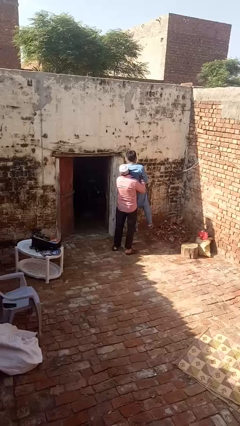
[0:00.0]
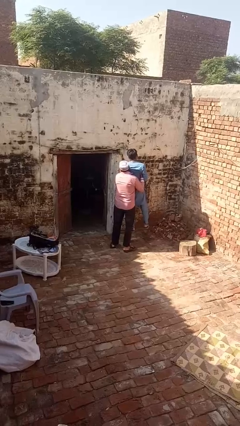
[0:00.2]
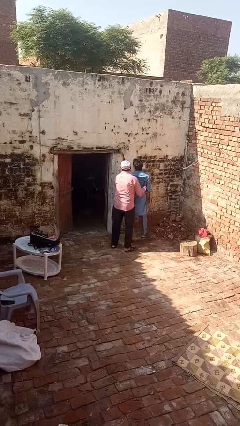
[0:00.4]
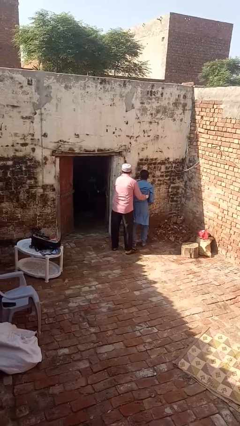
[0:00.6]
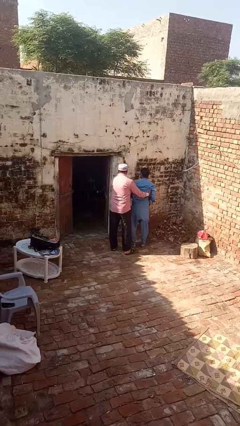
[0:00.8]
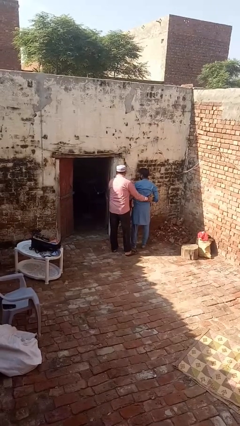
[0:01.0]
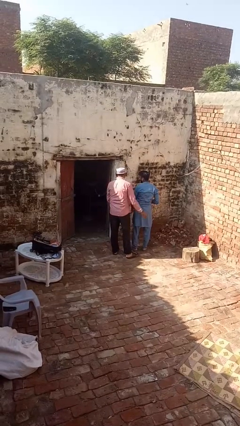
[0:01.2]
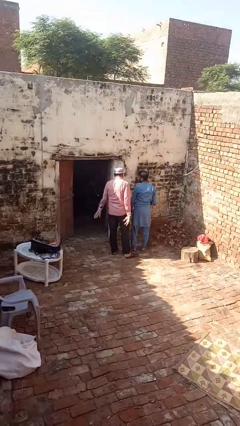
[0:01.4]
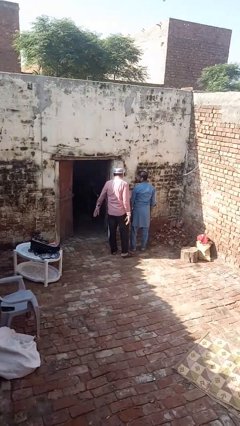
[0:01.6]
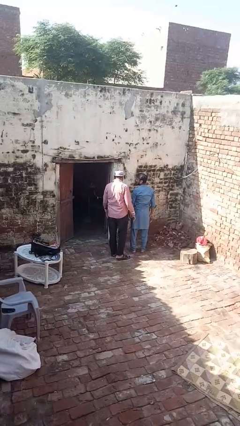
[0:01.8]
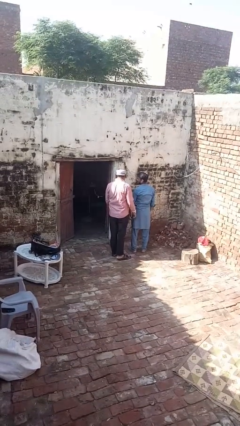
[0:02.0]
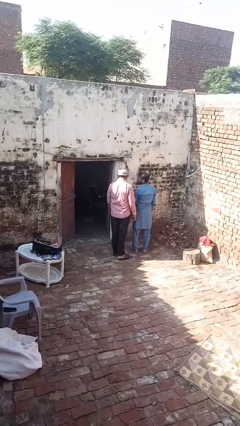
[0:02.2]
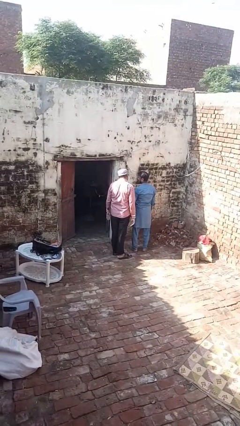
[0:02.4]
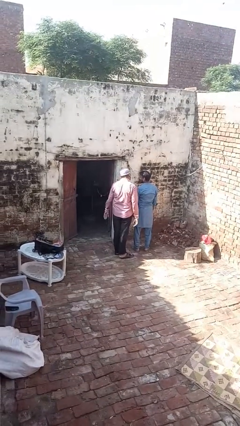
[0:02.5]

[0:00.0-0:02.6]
person puts down person

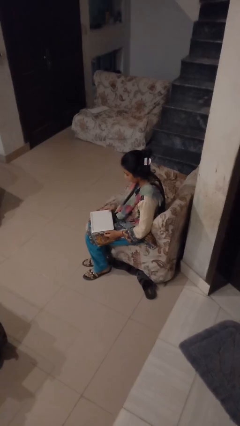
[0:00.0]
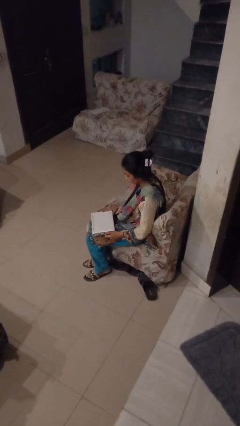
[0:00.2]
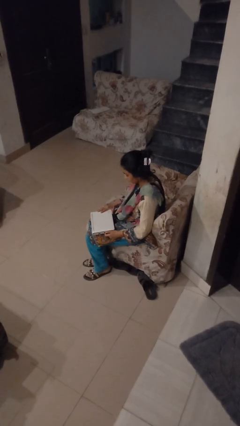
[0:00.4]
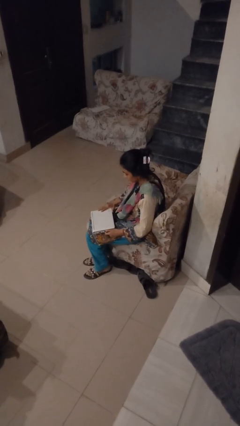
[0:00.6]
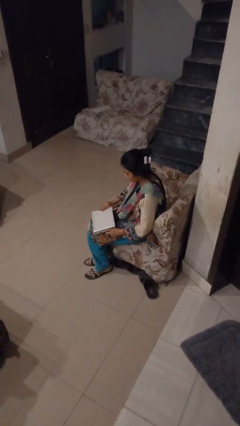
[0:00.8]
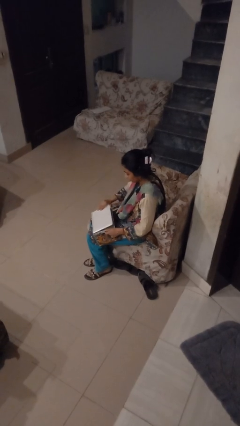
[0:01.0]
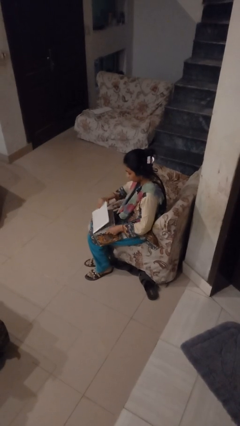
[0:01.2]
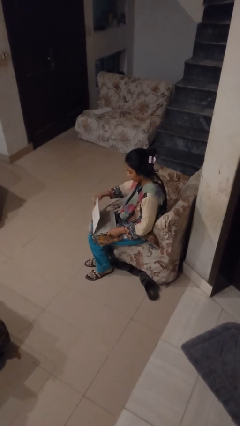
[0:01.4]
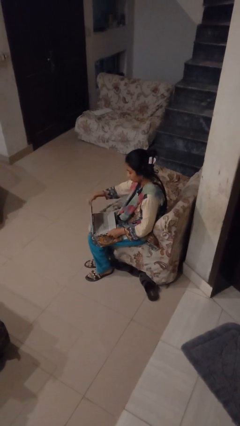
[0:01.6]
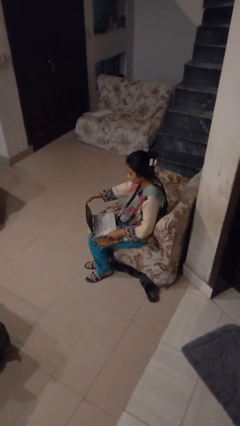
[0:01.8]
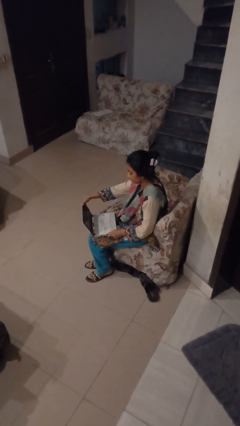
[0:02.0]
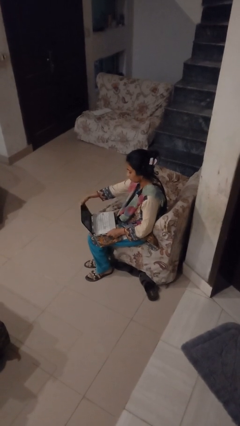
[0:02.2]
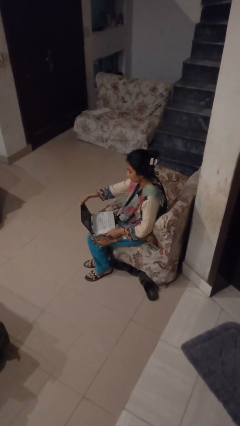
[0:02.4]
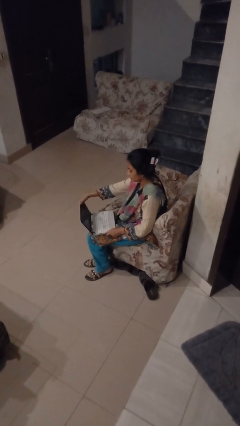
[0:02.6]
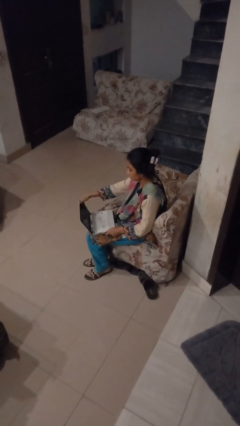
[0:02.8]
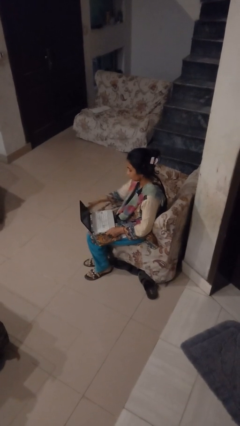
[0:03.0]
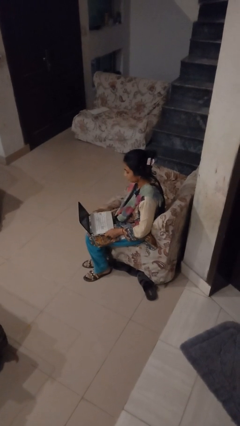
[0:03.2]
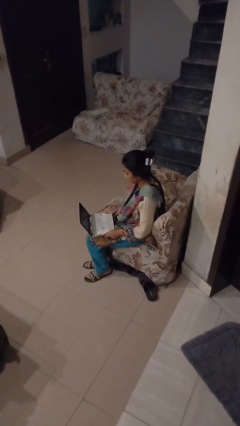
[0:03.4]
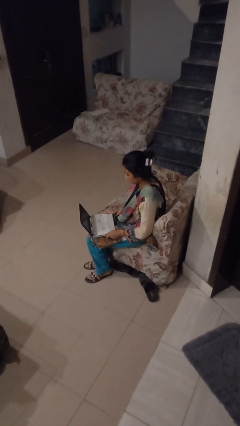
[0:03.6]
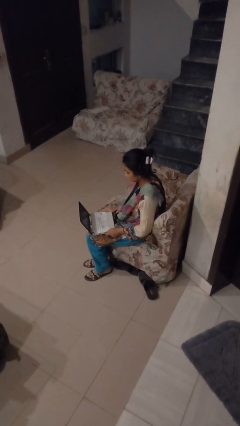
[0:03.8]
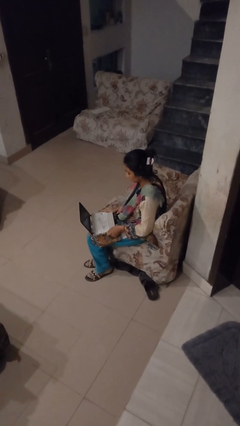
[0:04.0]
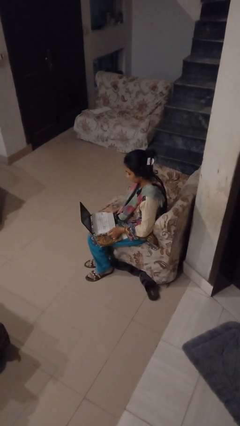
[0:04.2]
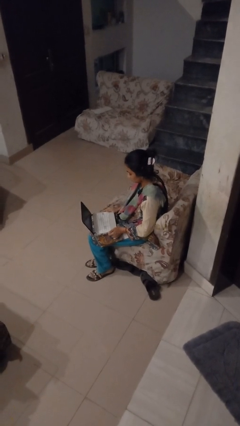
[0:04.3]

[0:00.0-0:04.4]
person opens laptop

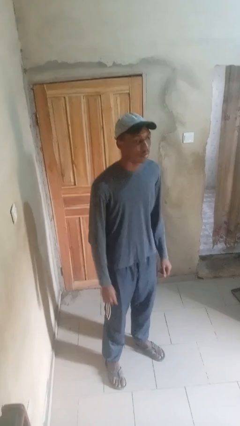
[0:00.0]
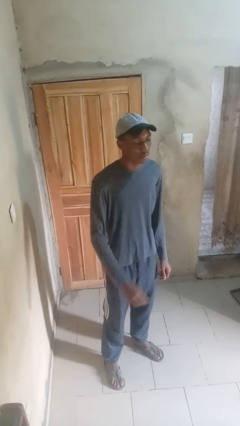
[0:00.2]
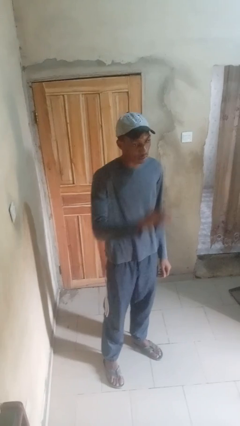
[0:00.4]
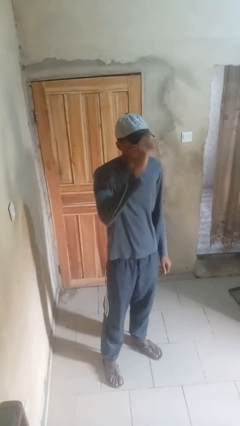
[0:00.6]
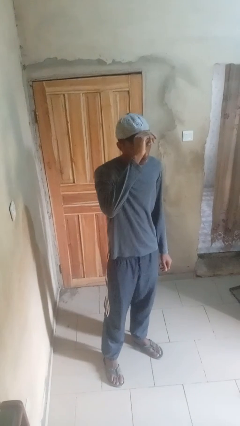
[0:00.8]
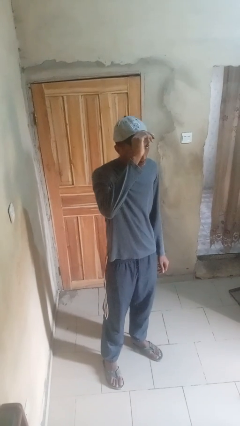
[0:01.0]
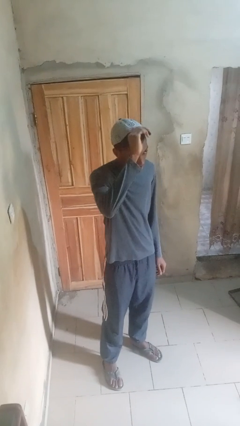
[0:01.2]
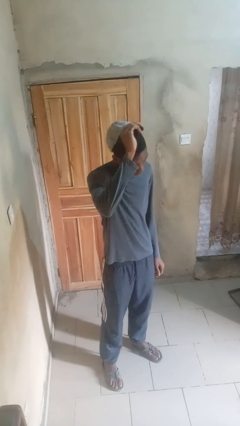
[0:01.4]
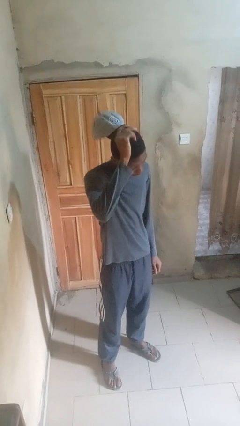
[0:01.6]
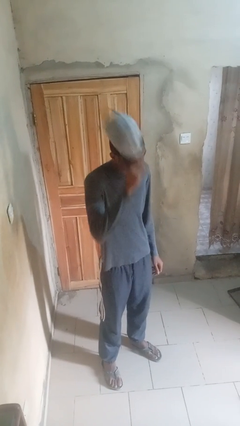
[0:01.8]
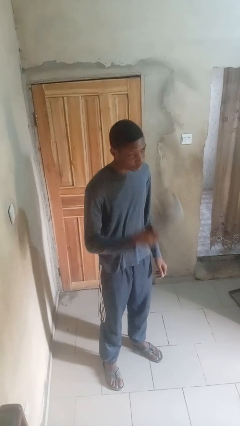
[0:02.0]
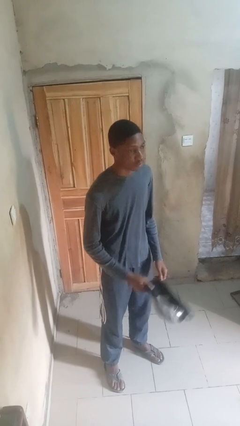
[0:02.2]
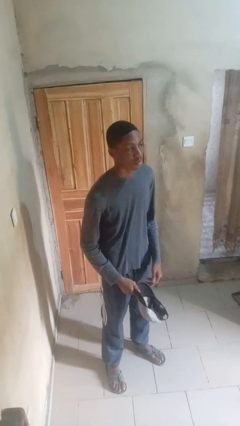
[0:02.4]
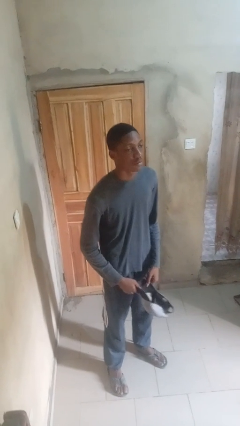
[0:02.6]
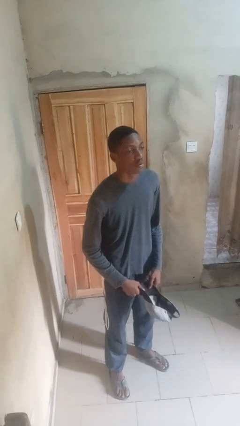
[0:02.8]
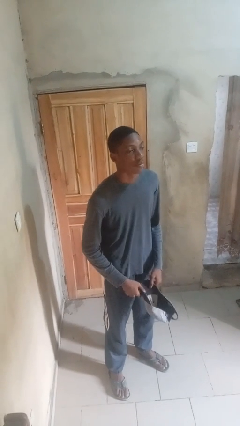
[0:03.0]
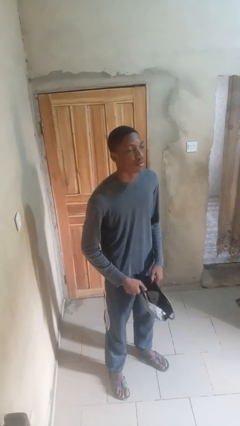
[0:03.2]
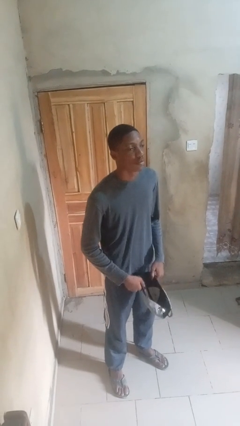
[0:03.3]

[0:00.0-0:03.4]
person takes off hat

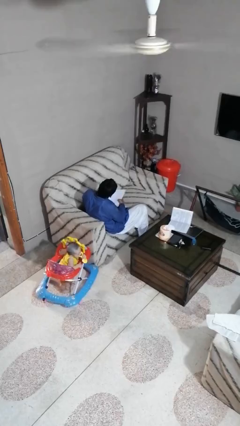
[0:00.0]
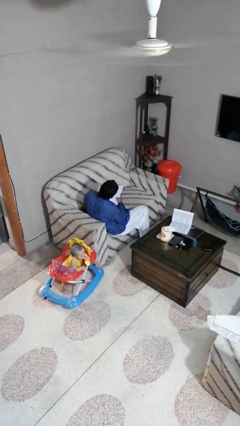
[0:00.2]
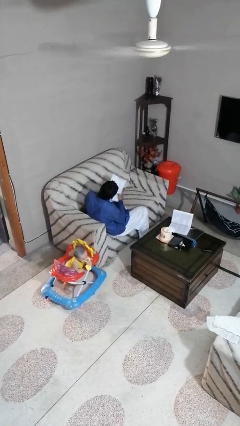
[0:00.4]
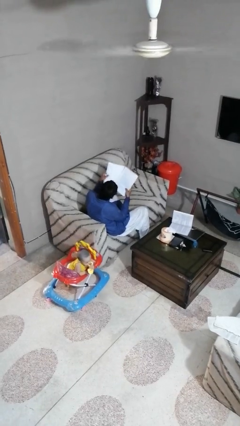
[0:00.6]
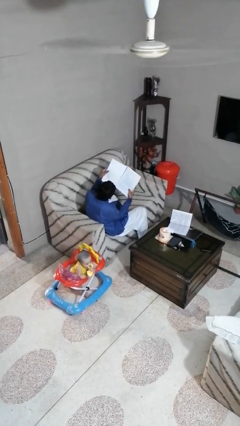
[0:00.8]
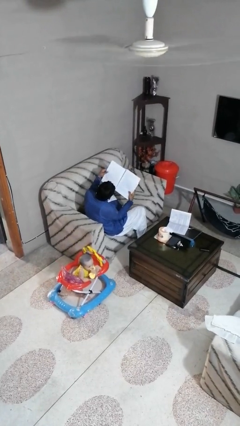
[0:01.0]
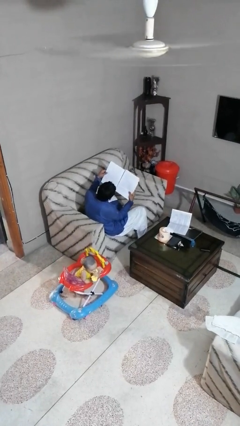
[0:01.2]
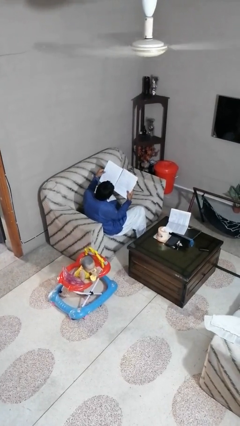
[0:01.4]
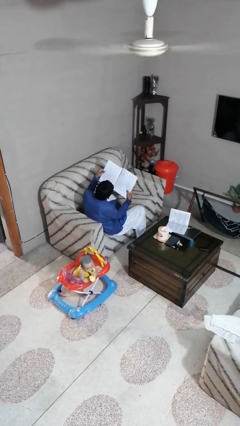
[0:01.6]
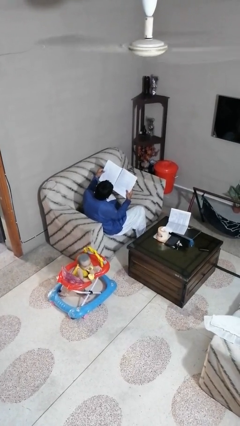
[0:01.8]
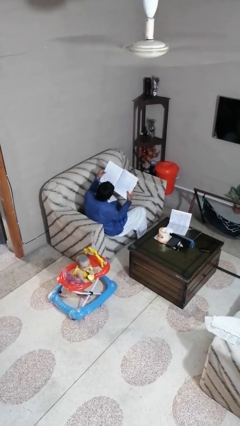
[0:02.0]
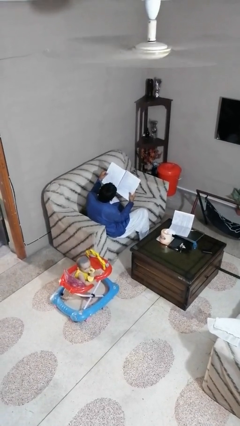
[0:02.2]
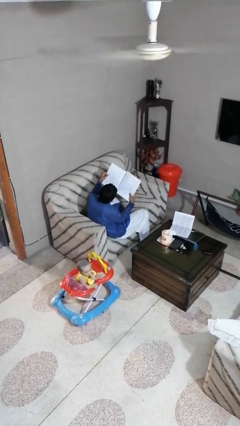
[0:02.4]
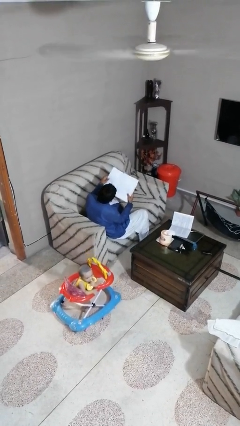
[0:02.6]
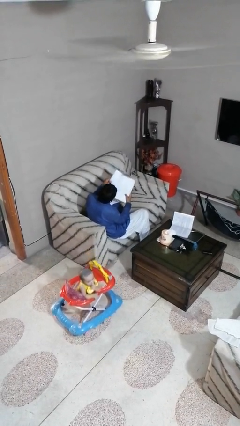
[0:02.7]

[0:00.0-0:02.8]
person reads magazine

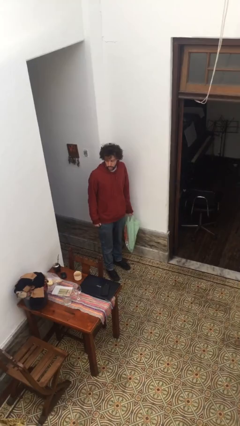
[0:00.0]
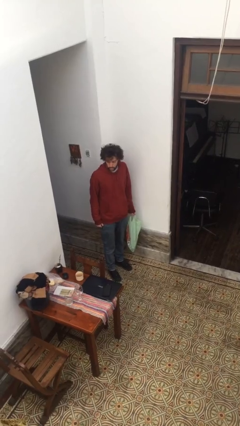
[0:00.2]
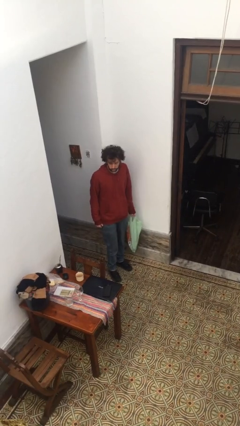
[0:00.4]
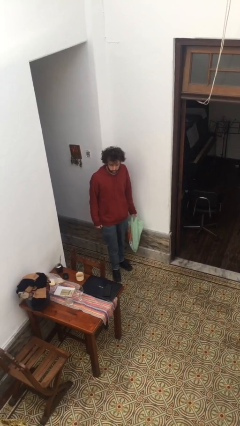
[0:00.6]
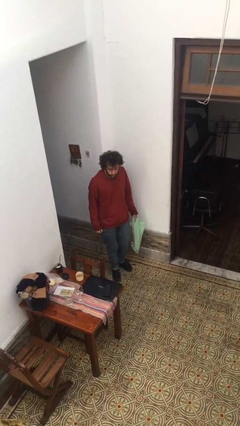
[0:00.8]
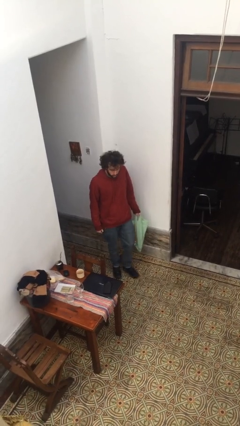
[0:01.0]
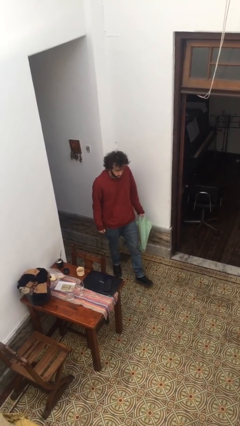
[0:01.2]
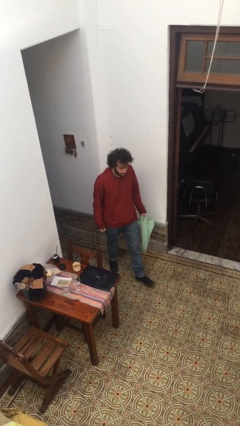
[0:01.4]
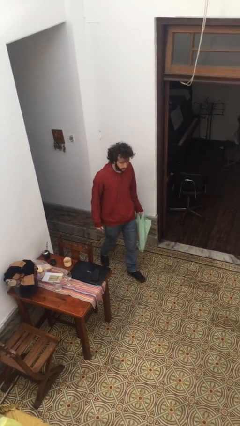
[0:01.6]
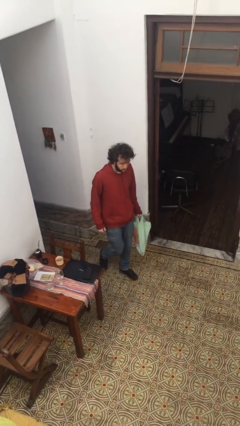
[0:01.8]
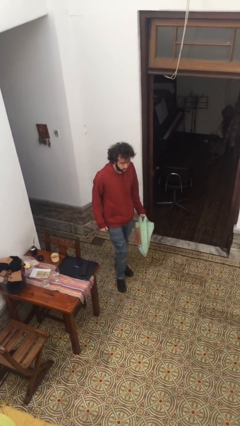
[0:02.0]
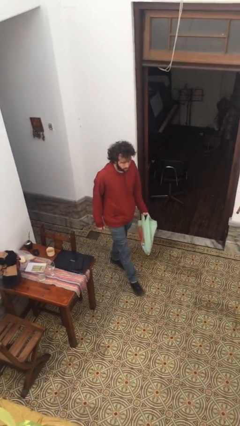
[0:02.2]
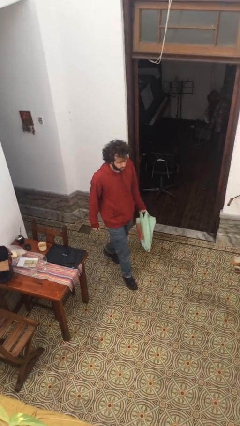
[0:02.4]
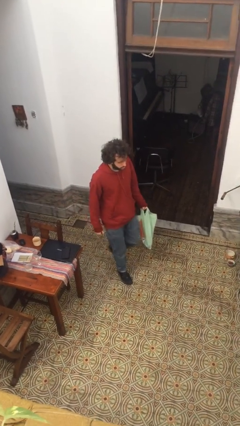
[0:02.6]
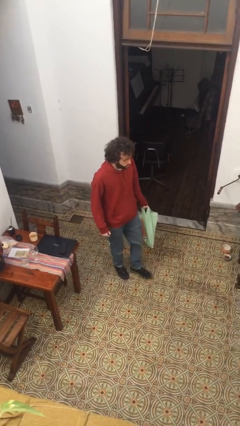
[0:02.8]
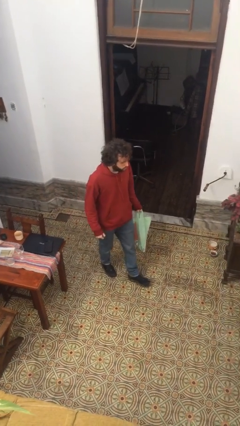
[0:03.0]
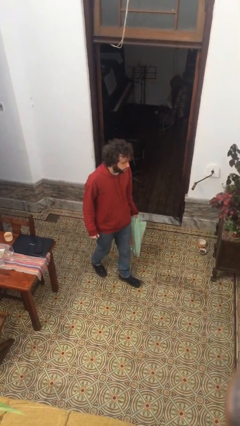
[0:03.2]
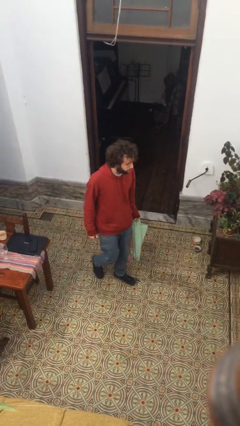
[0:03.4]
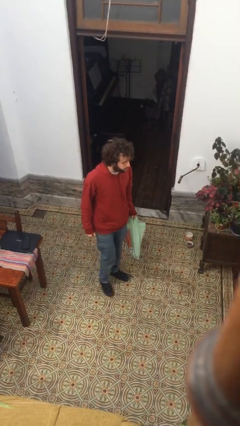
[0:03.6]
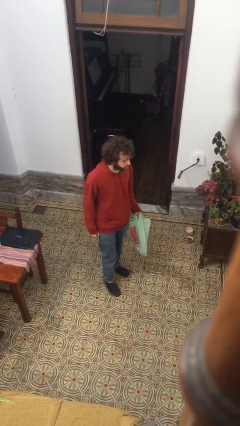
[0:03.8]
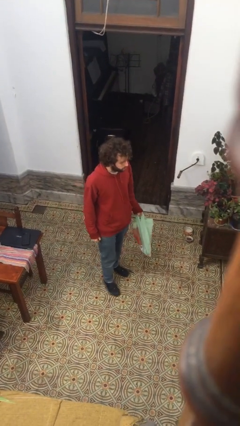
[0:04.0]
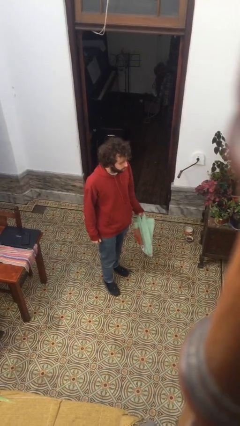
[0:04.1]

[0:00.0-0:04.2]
person carries groceries

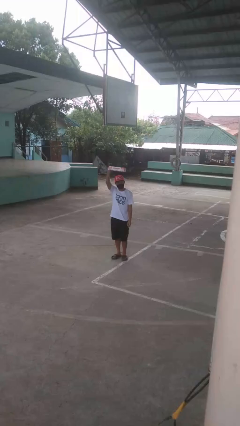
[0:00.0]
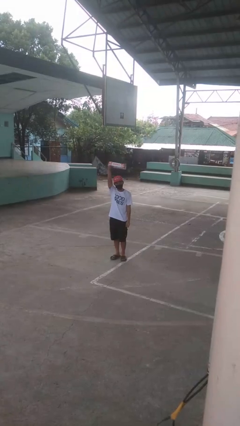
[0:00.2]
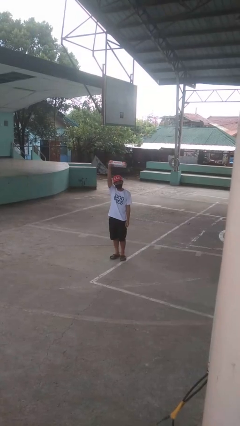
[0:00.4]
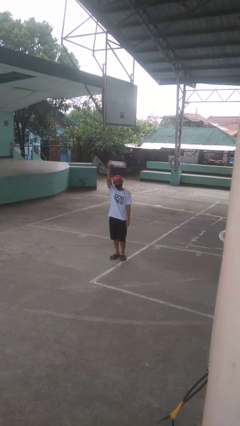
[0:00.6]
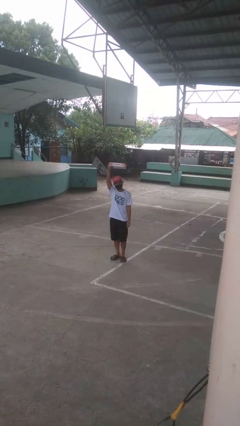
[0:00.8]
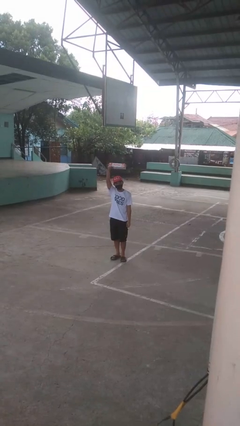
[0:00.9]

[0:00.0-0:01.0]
person holds object above head
